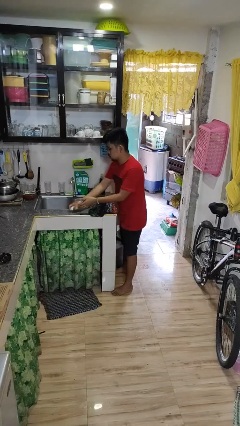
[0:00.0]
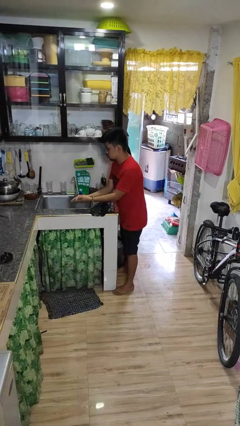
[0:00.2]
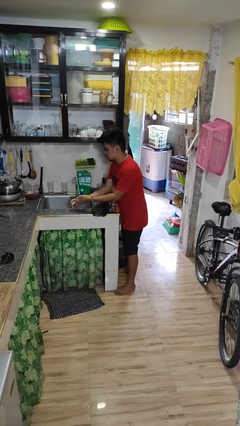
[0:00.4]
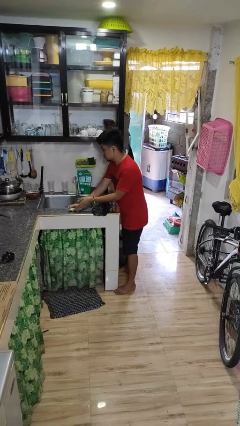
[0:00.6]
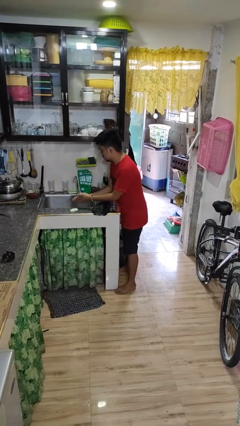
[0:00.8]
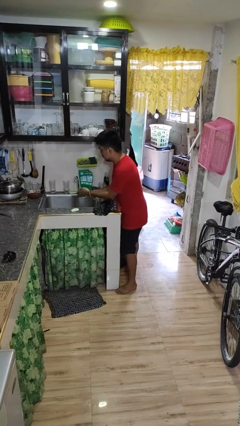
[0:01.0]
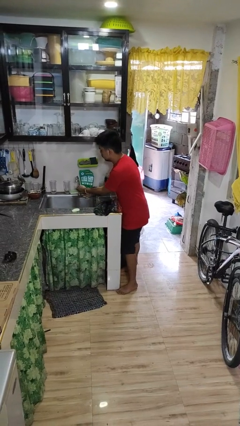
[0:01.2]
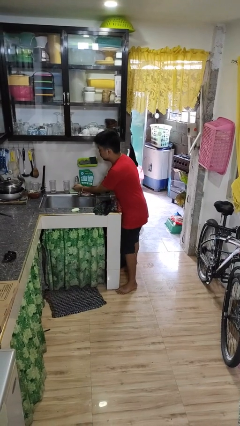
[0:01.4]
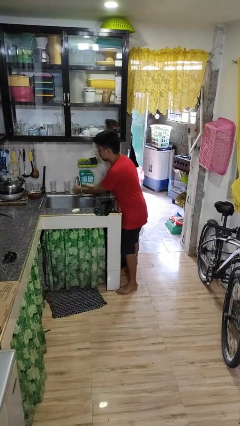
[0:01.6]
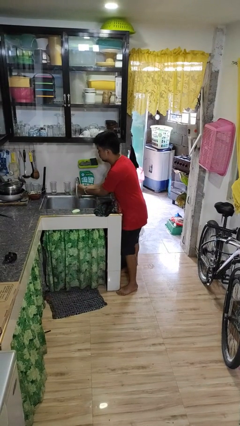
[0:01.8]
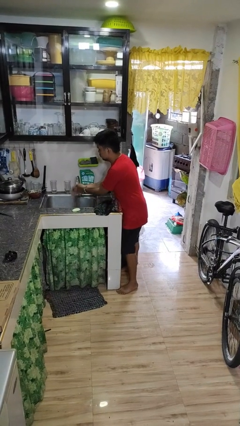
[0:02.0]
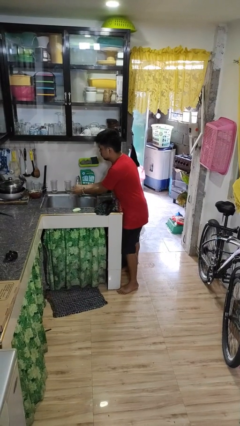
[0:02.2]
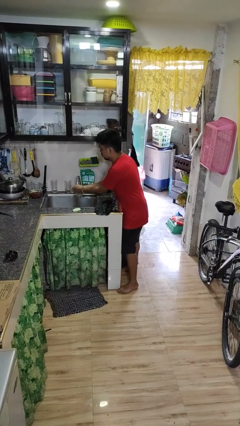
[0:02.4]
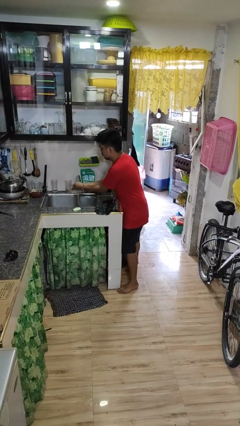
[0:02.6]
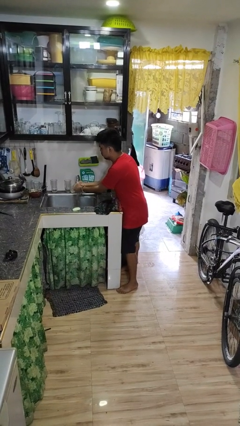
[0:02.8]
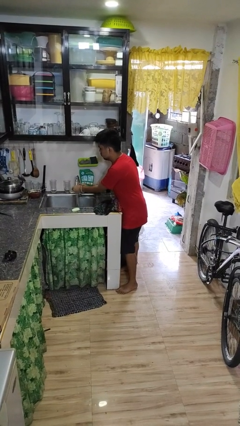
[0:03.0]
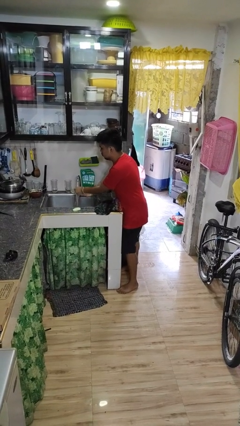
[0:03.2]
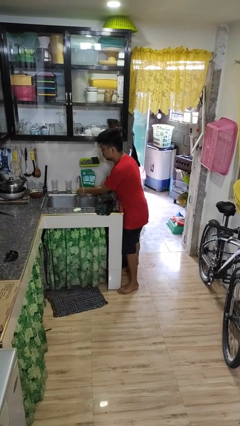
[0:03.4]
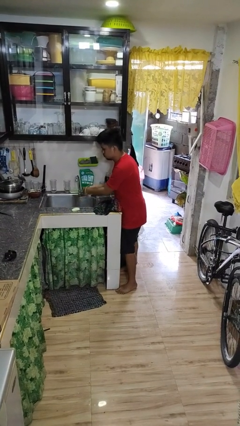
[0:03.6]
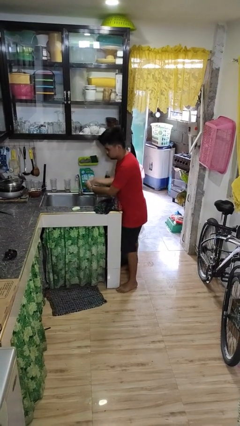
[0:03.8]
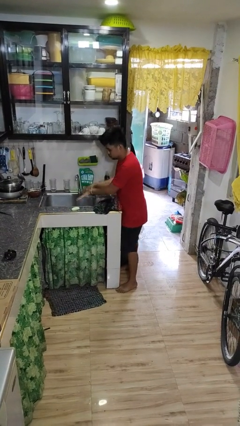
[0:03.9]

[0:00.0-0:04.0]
person washes hands

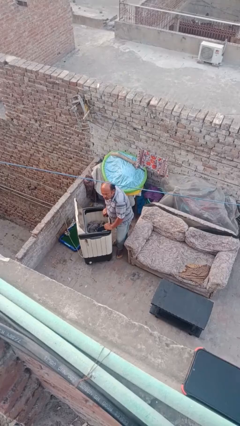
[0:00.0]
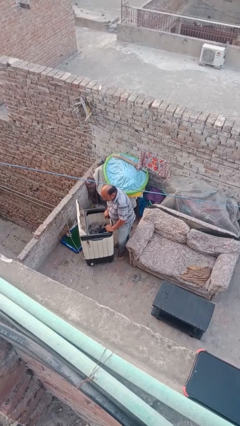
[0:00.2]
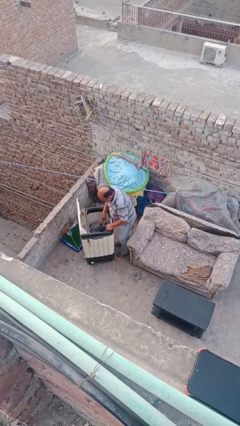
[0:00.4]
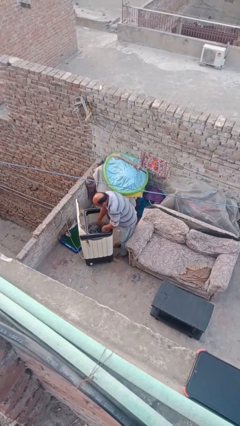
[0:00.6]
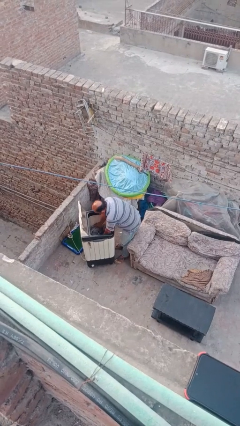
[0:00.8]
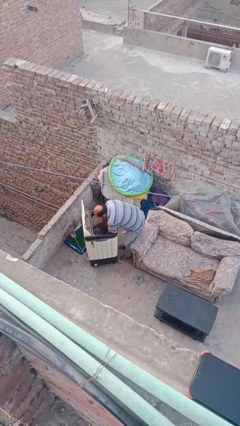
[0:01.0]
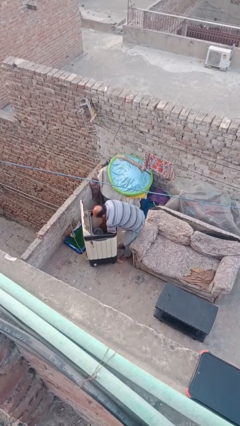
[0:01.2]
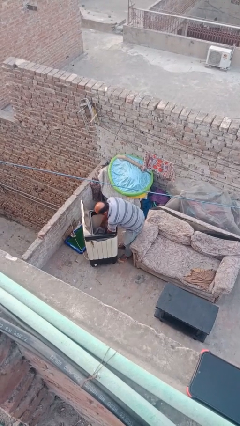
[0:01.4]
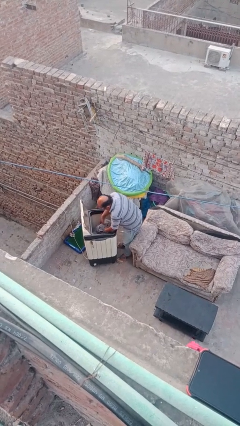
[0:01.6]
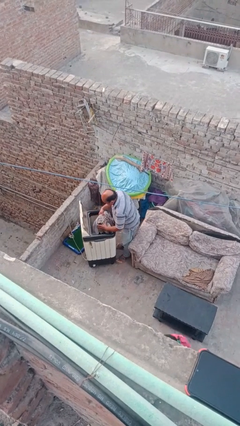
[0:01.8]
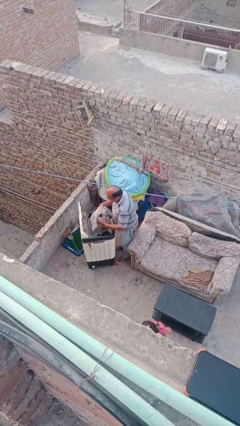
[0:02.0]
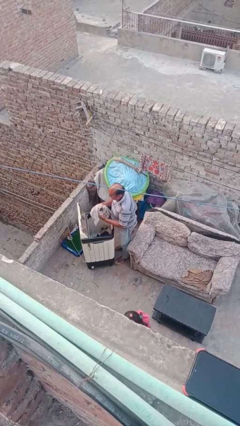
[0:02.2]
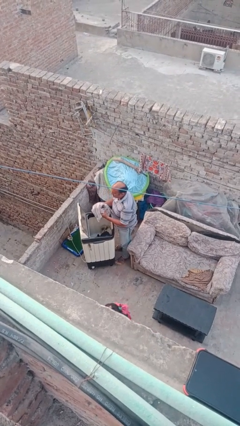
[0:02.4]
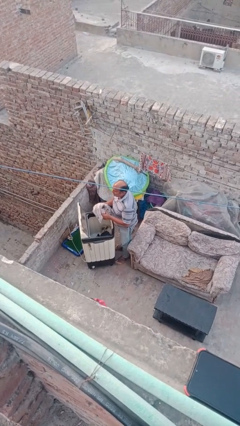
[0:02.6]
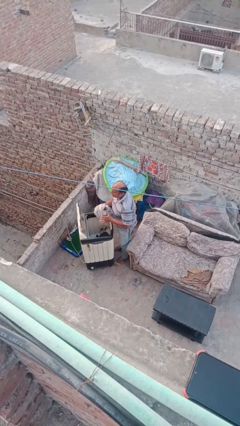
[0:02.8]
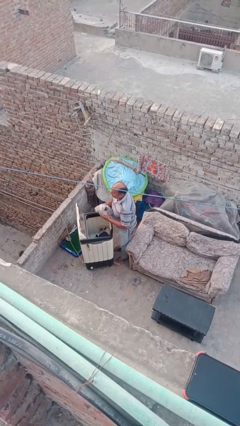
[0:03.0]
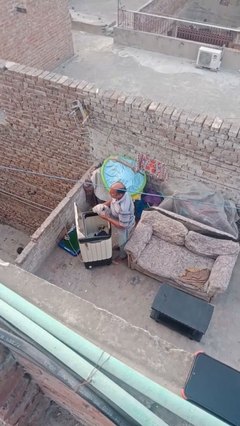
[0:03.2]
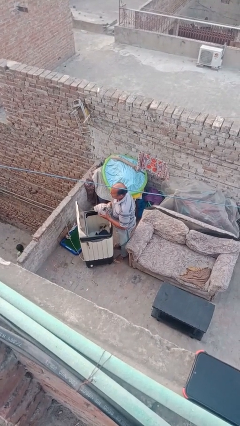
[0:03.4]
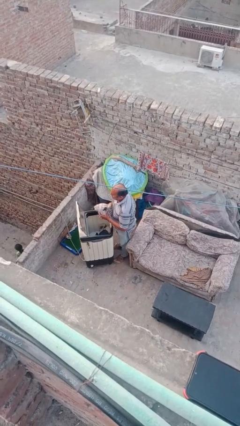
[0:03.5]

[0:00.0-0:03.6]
person unloads clotheswasher

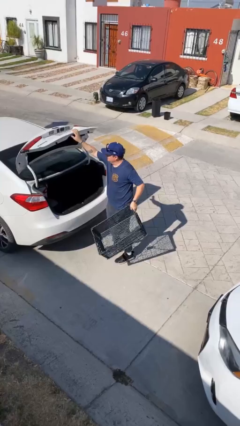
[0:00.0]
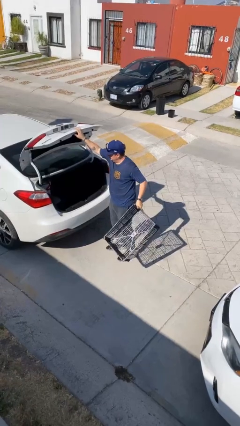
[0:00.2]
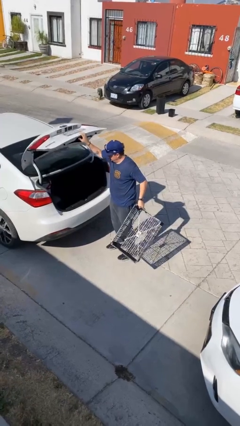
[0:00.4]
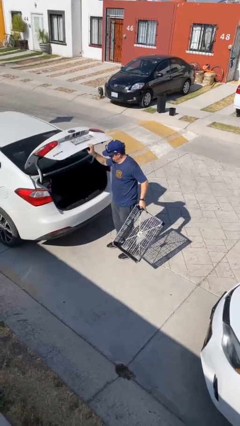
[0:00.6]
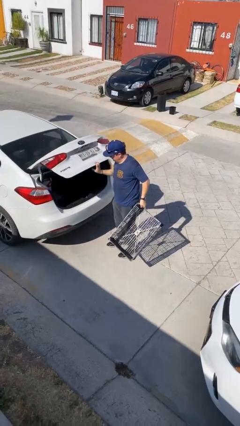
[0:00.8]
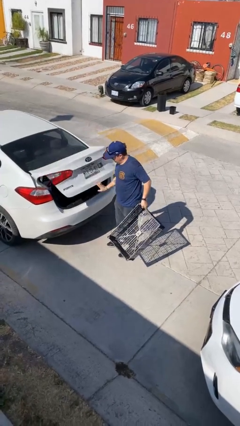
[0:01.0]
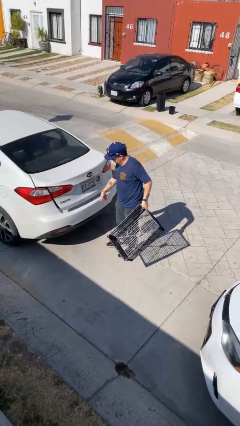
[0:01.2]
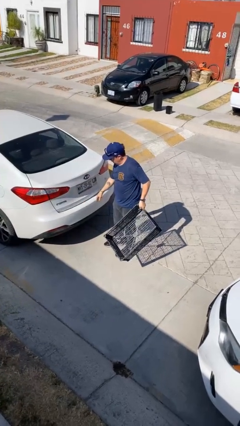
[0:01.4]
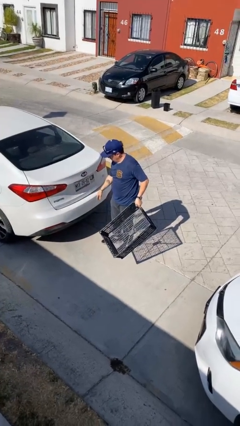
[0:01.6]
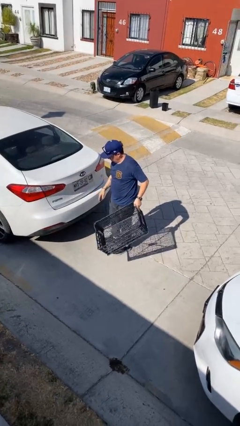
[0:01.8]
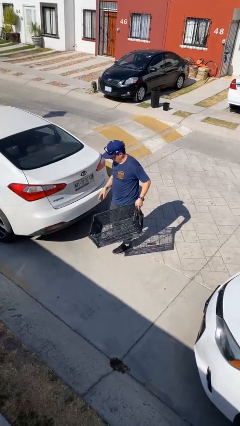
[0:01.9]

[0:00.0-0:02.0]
person closes car trunk

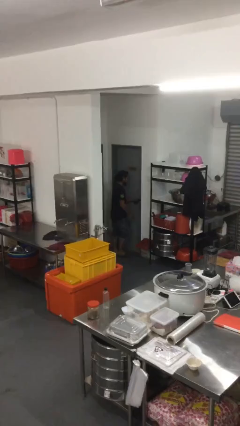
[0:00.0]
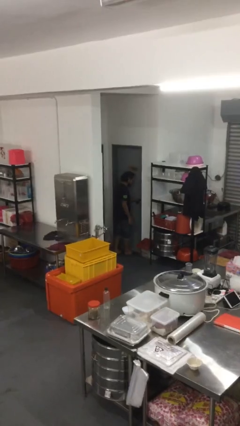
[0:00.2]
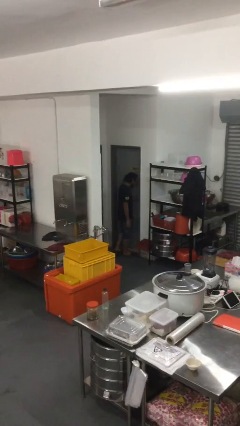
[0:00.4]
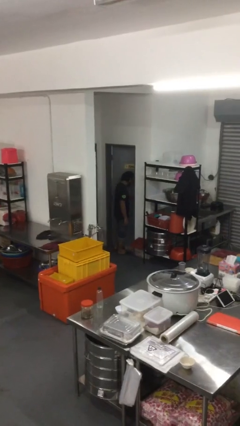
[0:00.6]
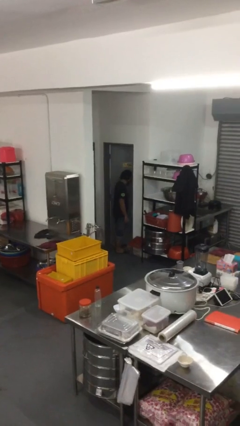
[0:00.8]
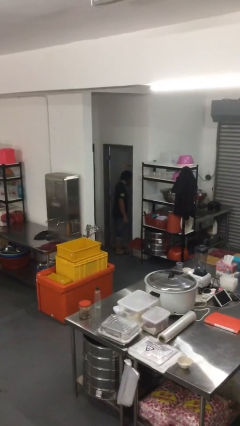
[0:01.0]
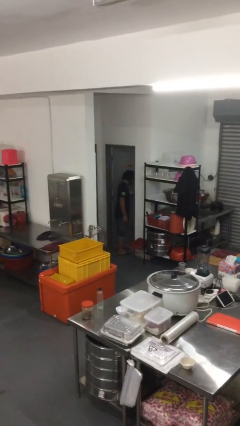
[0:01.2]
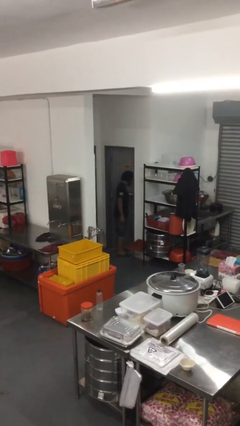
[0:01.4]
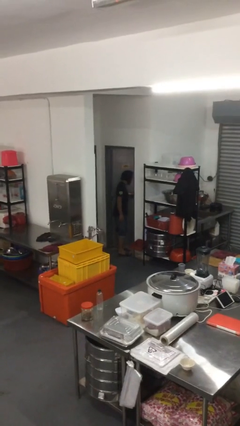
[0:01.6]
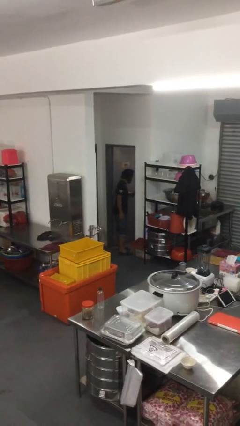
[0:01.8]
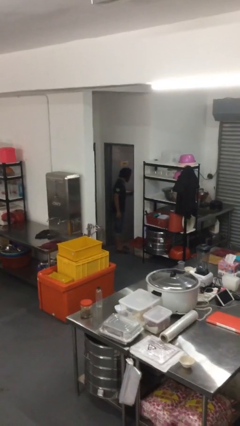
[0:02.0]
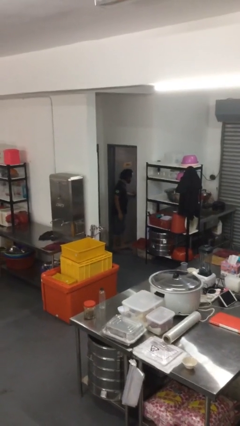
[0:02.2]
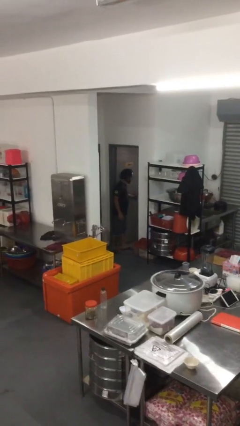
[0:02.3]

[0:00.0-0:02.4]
person opens facility door

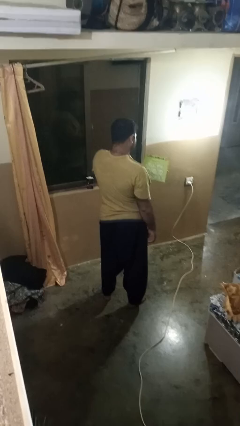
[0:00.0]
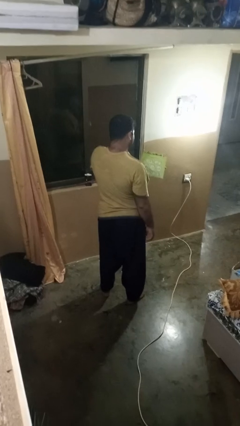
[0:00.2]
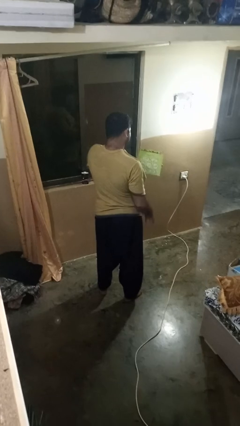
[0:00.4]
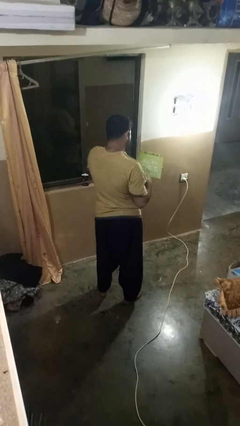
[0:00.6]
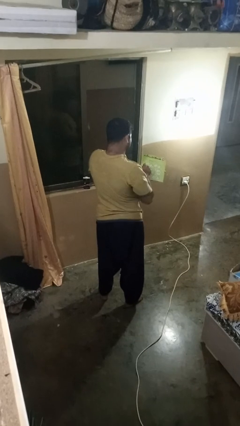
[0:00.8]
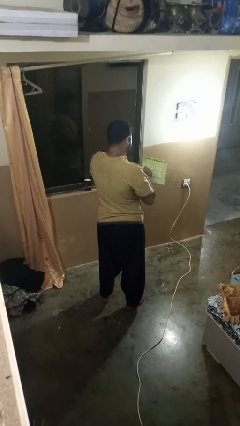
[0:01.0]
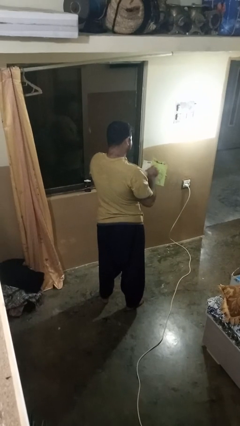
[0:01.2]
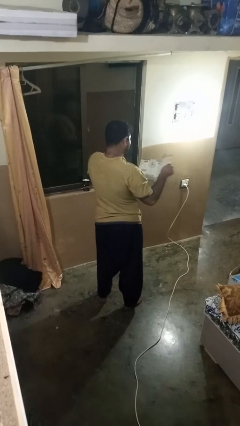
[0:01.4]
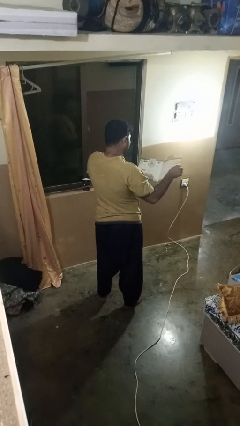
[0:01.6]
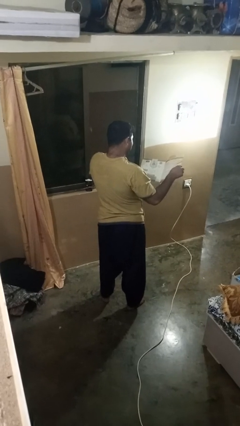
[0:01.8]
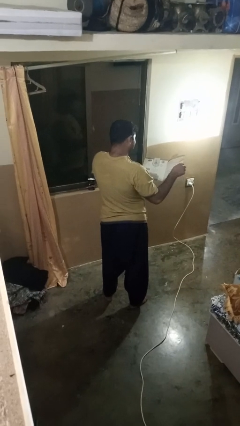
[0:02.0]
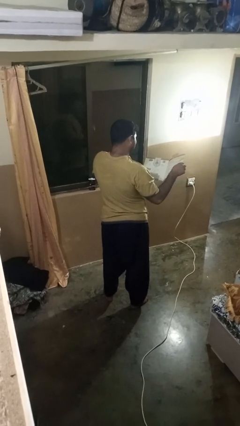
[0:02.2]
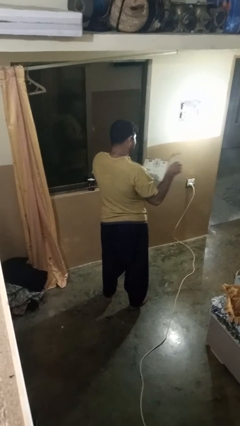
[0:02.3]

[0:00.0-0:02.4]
person reads magazine

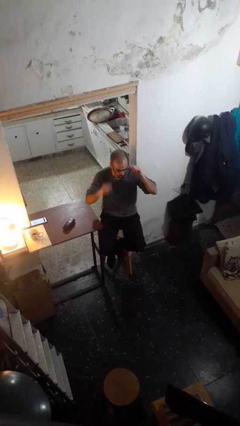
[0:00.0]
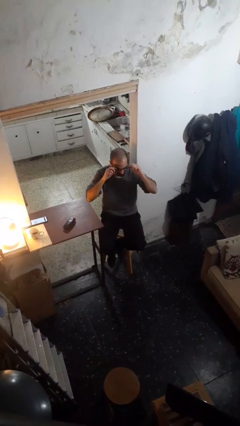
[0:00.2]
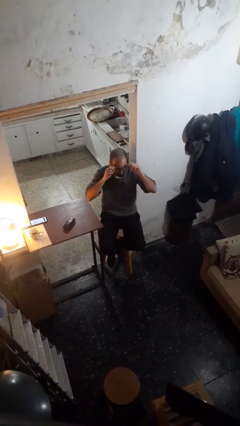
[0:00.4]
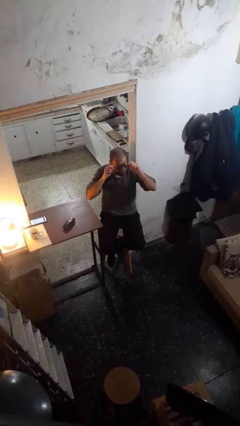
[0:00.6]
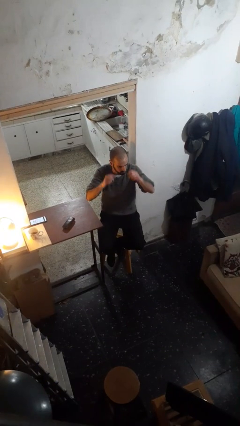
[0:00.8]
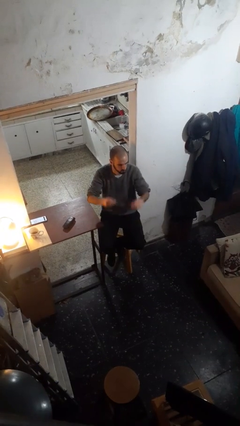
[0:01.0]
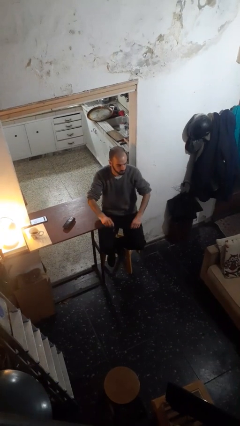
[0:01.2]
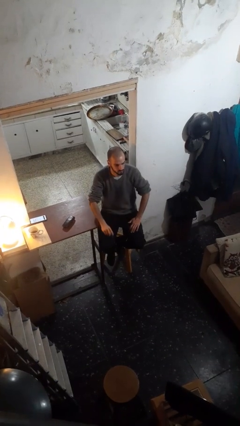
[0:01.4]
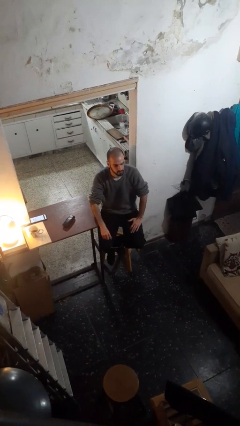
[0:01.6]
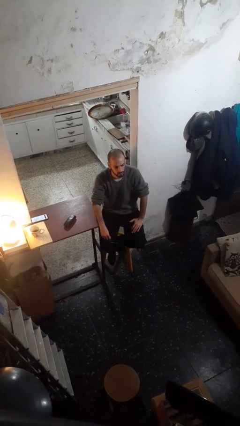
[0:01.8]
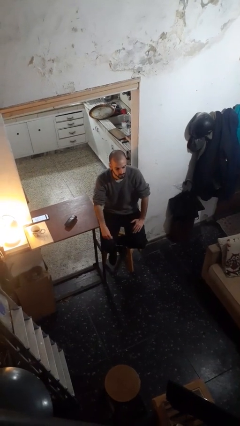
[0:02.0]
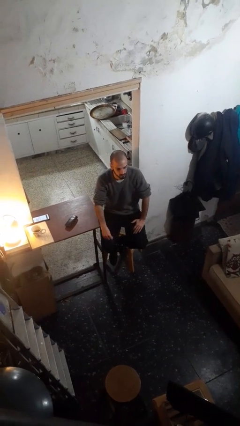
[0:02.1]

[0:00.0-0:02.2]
person takes off glasses

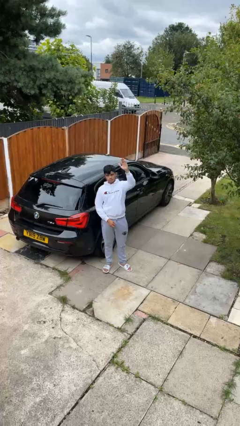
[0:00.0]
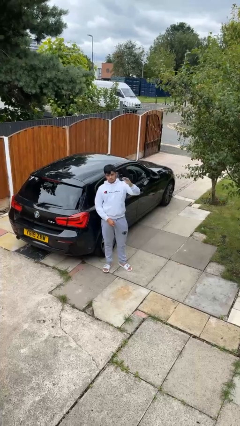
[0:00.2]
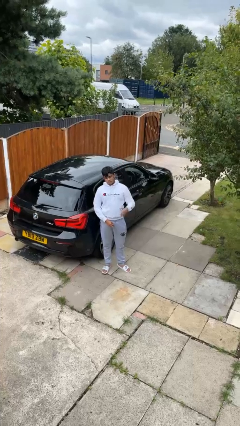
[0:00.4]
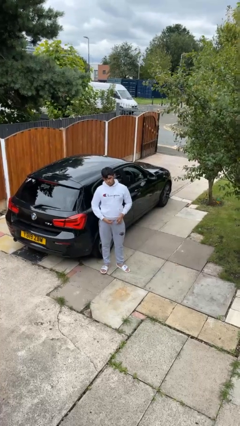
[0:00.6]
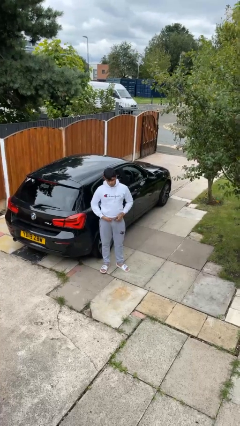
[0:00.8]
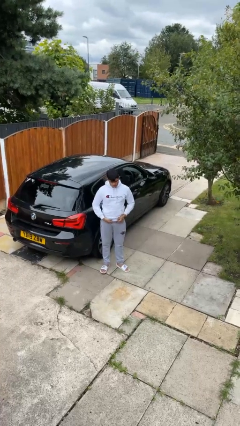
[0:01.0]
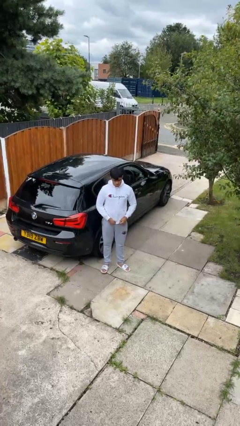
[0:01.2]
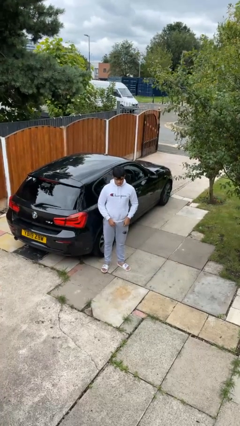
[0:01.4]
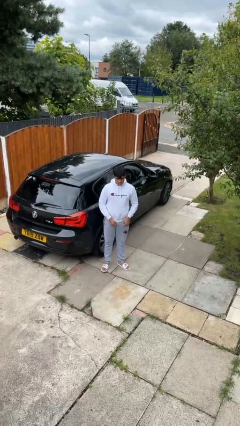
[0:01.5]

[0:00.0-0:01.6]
person gestures lower hand
